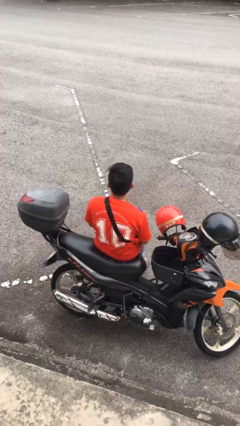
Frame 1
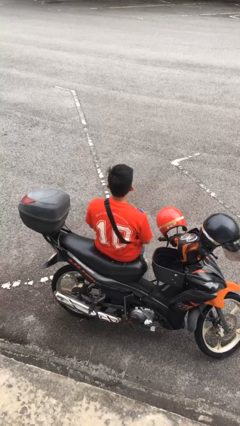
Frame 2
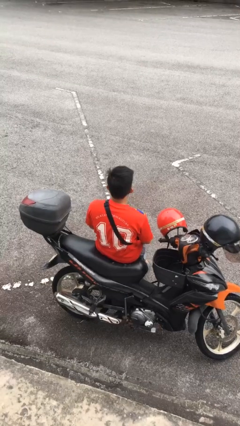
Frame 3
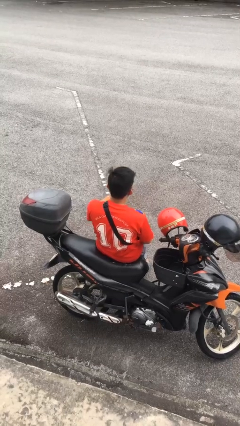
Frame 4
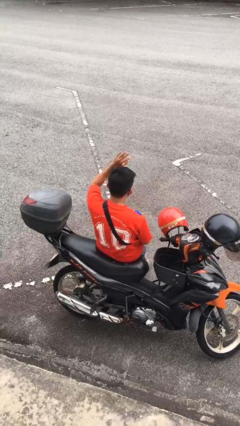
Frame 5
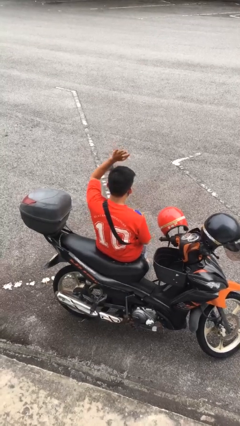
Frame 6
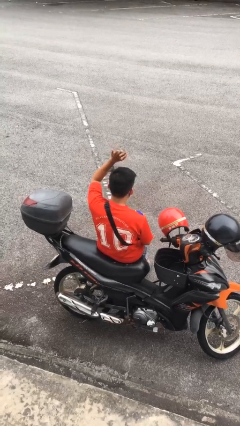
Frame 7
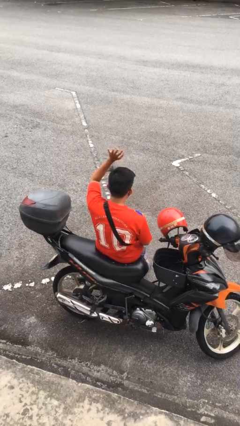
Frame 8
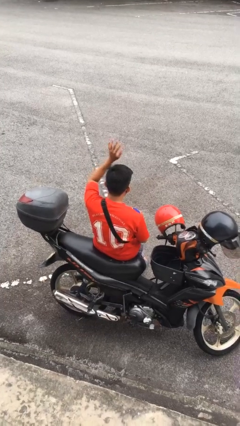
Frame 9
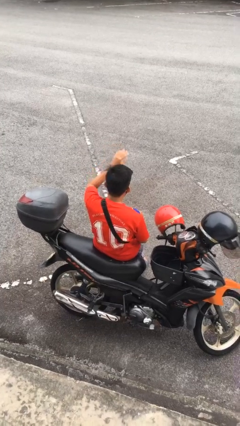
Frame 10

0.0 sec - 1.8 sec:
person waves at person

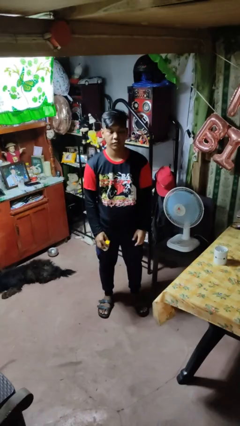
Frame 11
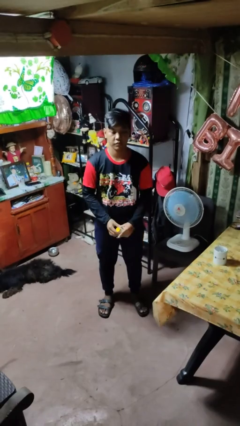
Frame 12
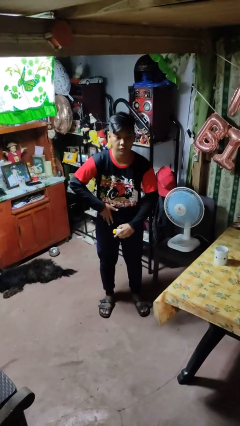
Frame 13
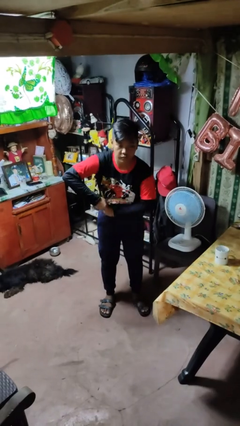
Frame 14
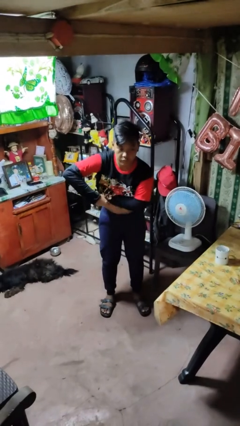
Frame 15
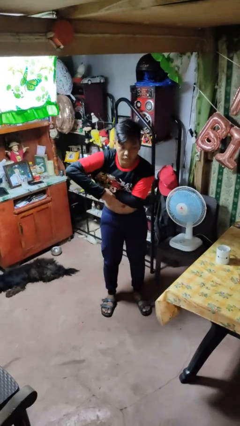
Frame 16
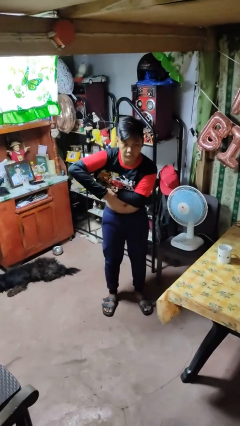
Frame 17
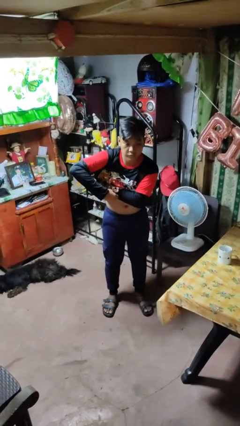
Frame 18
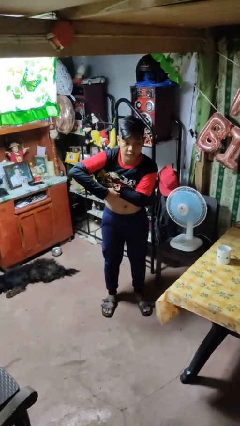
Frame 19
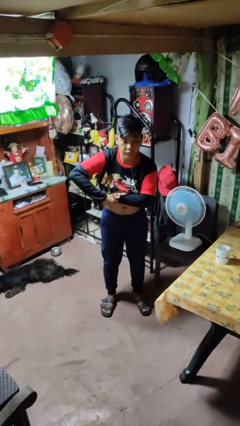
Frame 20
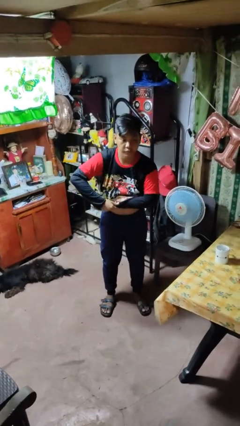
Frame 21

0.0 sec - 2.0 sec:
person applies deodorant

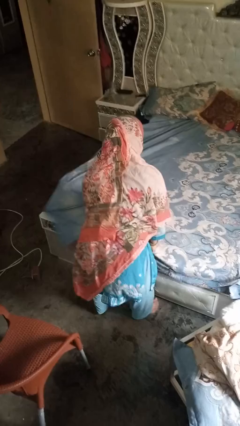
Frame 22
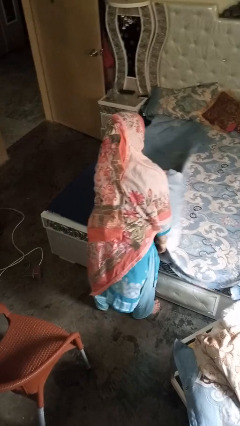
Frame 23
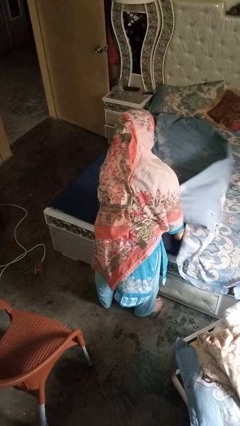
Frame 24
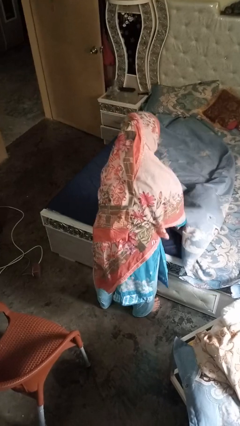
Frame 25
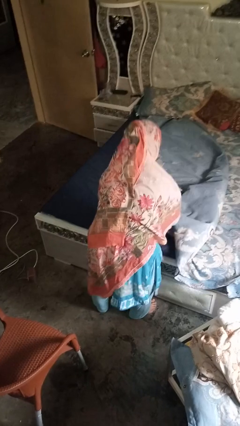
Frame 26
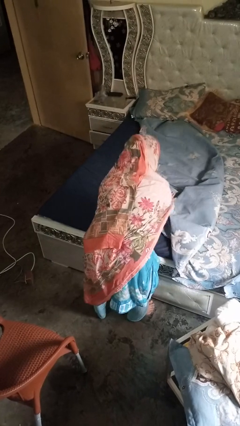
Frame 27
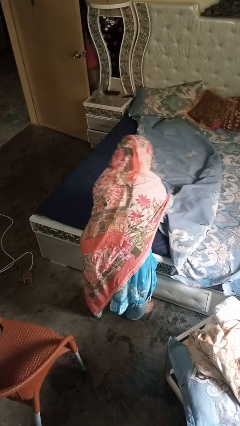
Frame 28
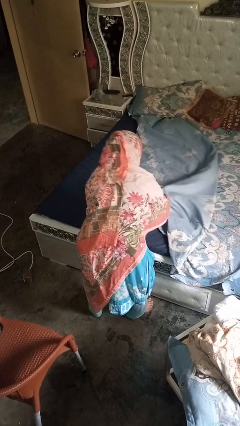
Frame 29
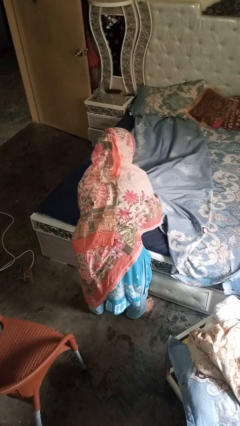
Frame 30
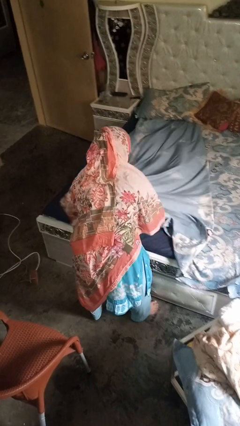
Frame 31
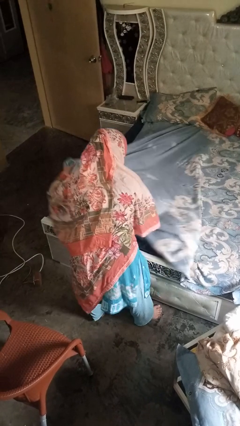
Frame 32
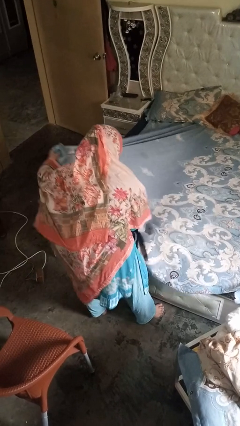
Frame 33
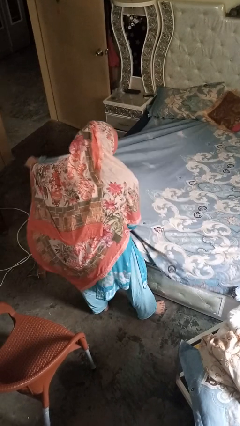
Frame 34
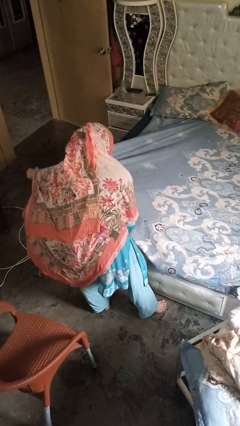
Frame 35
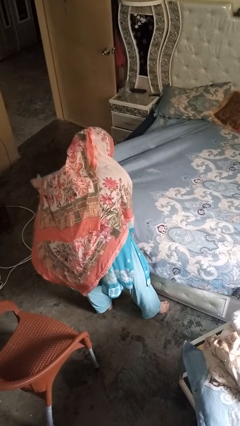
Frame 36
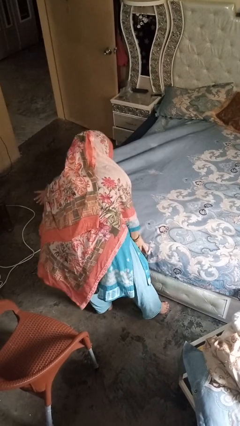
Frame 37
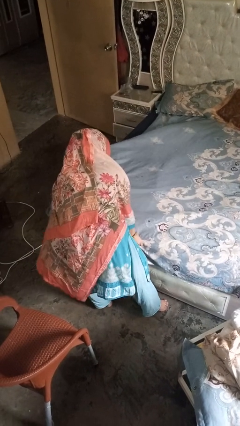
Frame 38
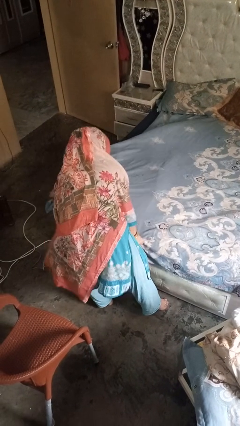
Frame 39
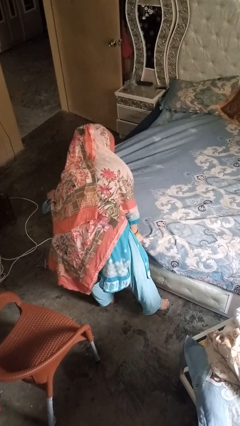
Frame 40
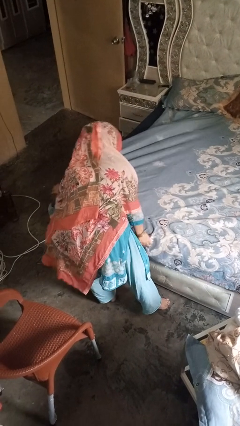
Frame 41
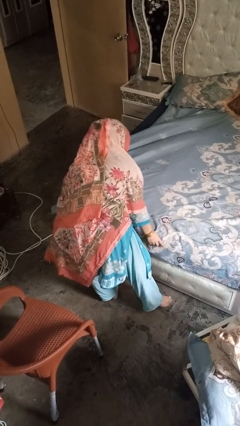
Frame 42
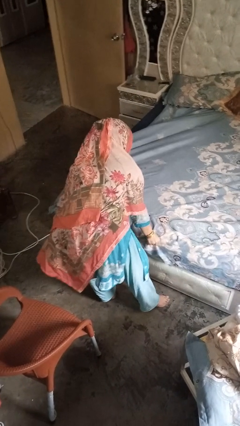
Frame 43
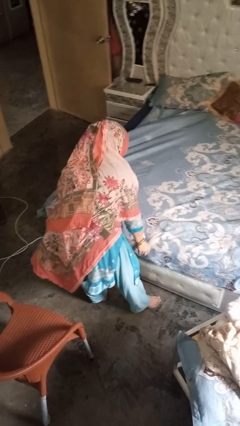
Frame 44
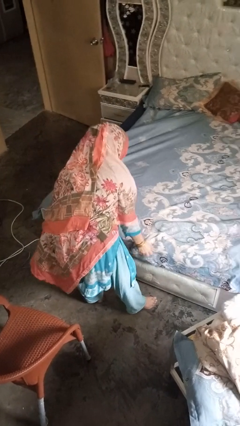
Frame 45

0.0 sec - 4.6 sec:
person makes bed

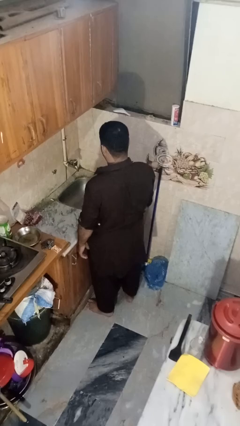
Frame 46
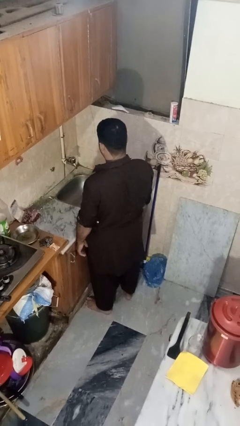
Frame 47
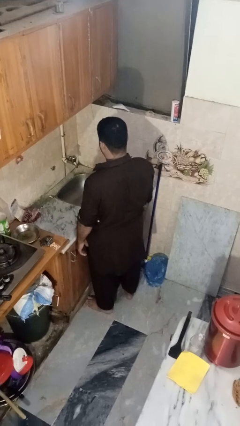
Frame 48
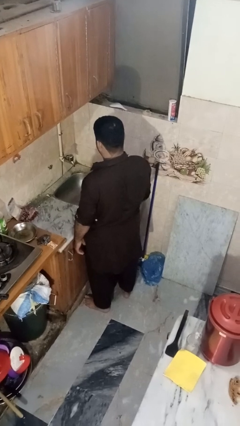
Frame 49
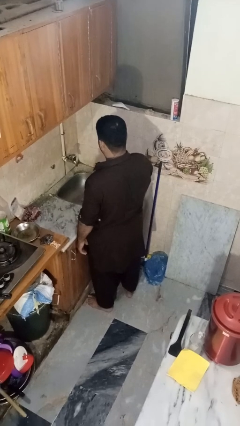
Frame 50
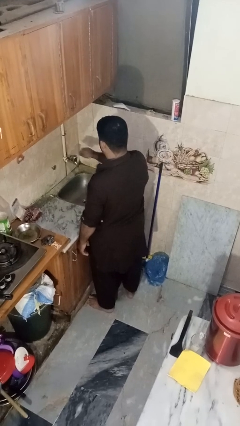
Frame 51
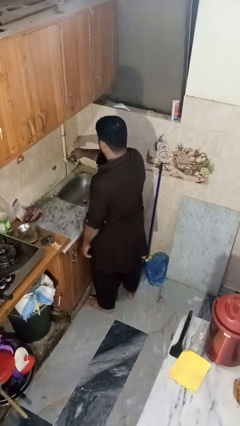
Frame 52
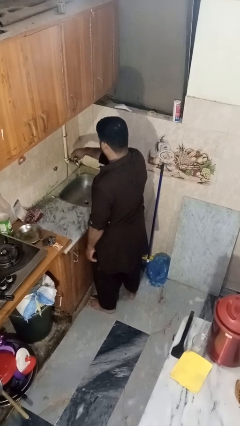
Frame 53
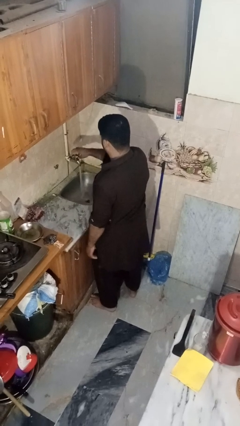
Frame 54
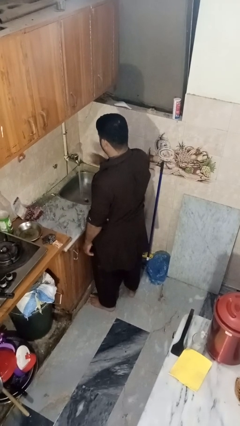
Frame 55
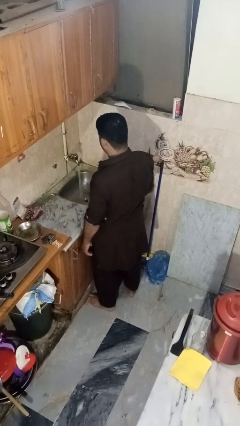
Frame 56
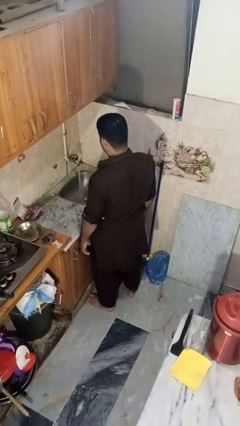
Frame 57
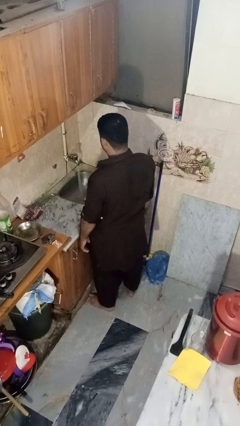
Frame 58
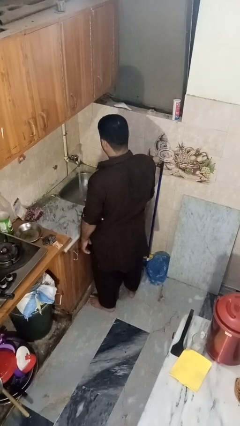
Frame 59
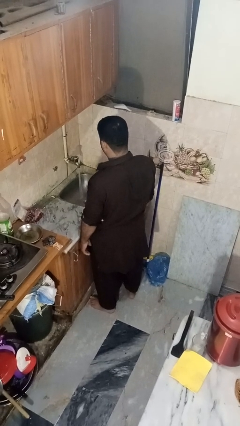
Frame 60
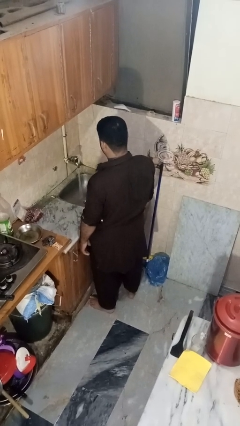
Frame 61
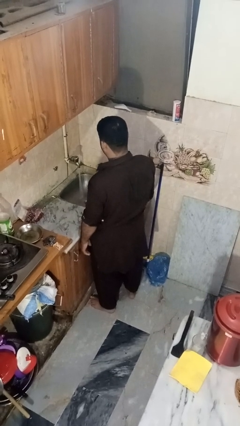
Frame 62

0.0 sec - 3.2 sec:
person turns on faucet

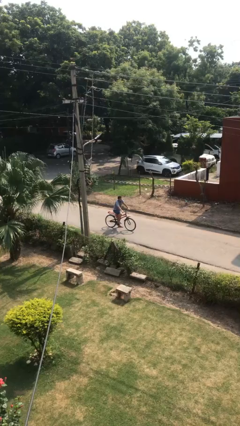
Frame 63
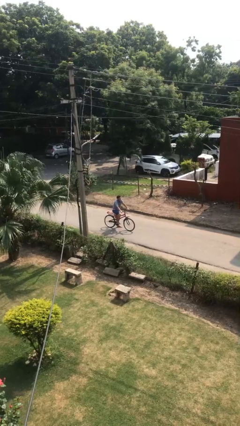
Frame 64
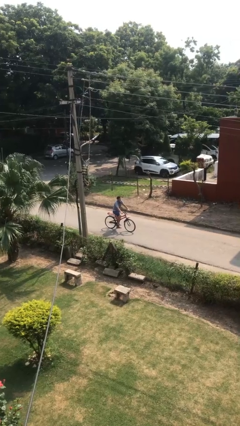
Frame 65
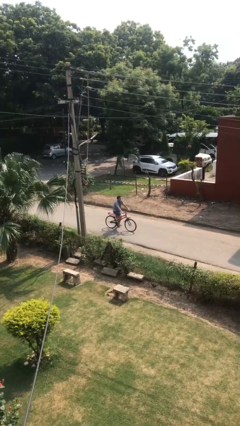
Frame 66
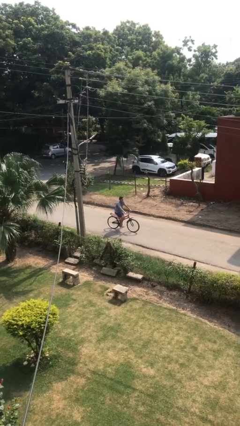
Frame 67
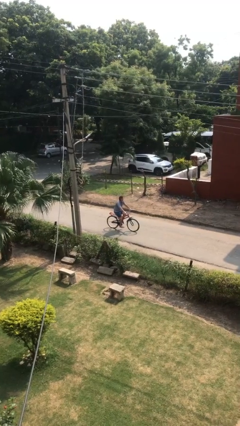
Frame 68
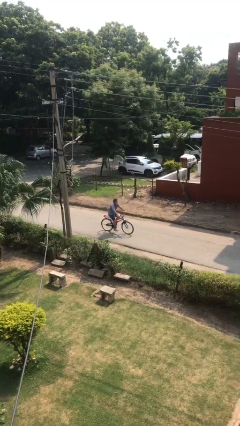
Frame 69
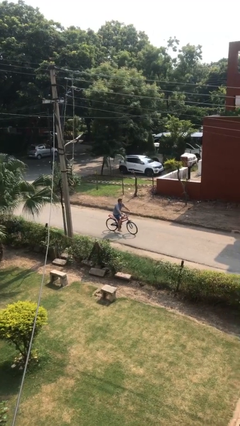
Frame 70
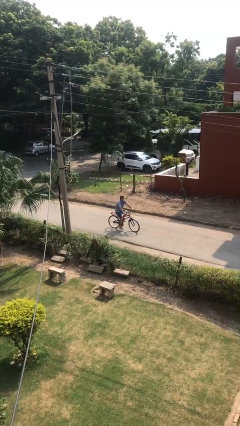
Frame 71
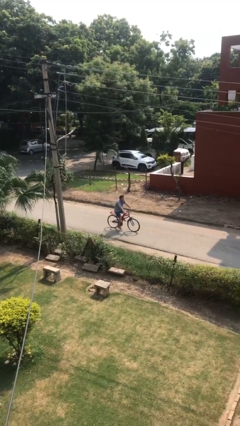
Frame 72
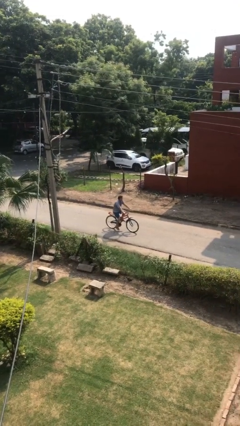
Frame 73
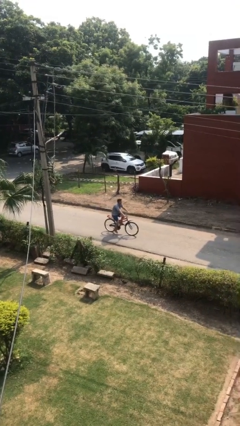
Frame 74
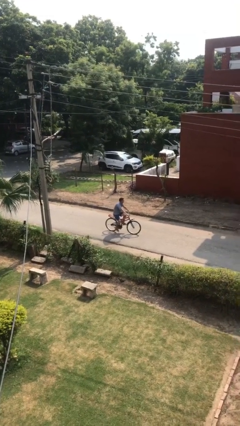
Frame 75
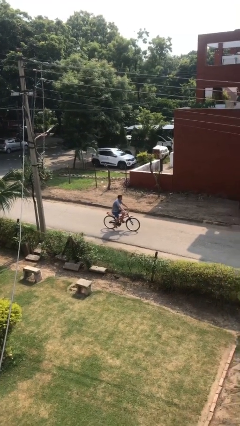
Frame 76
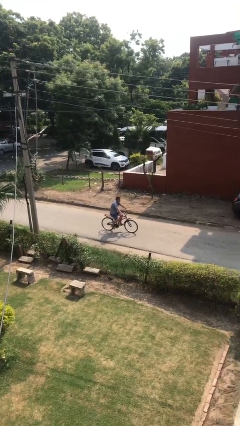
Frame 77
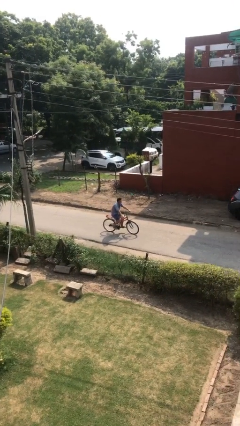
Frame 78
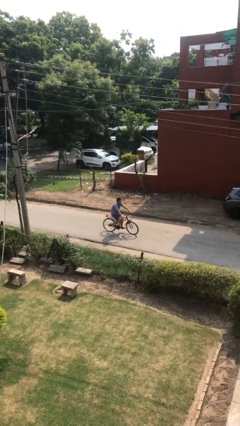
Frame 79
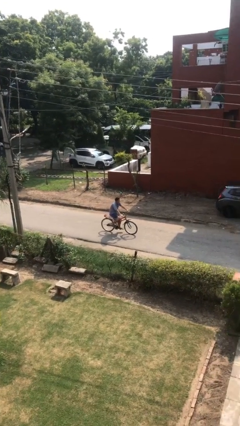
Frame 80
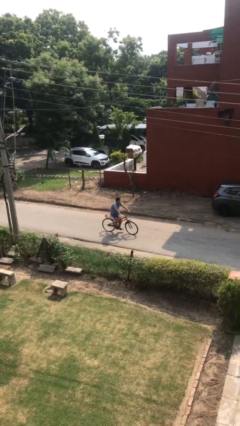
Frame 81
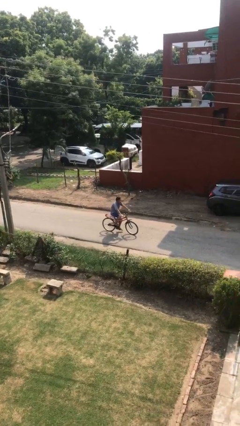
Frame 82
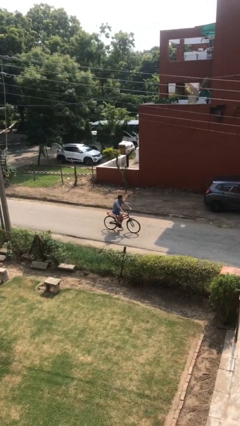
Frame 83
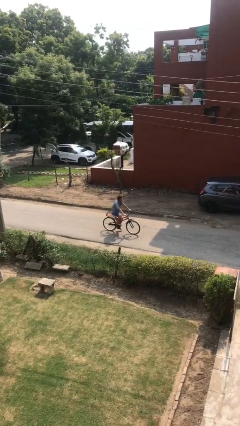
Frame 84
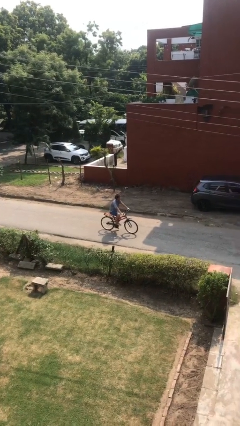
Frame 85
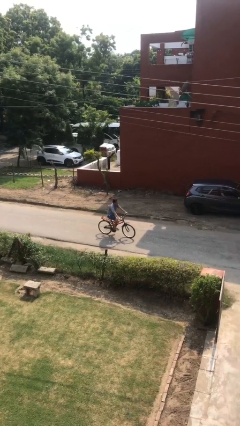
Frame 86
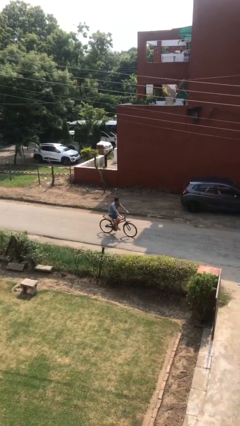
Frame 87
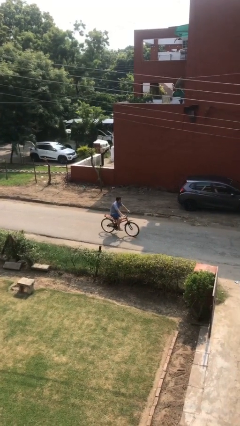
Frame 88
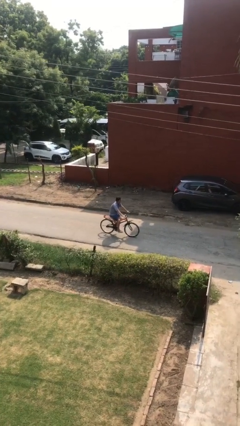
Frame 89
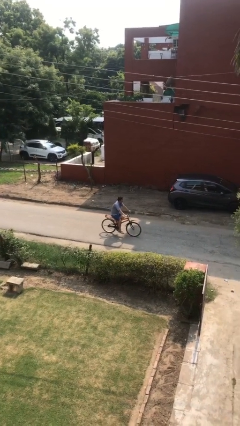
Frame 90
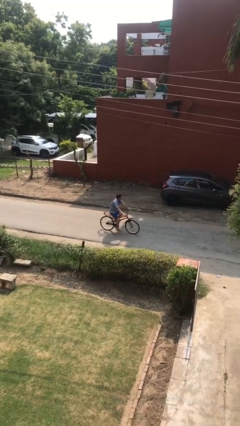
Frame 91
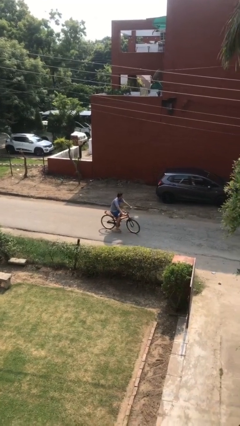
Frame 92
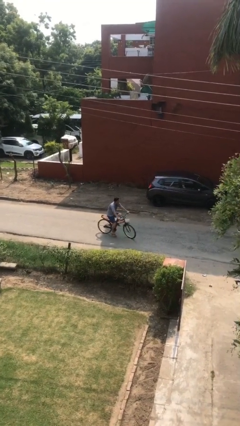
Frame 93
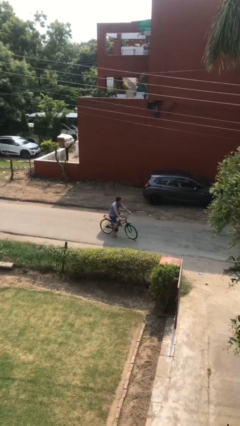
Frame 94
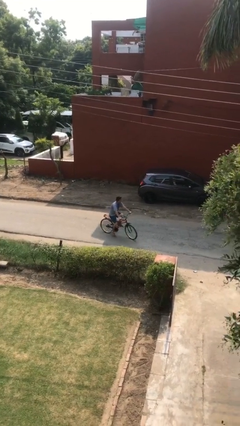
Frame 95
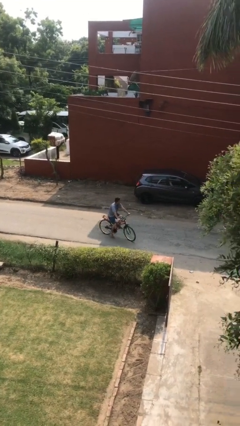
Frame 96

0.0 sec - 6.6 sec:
person rides bicycle
